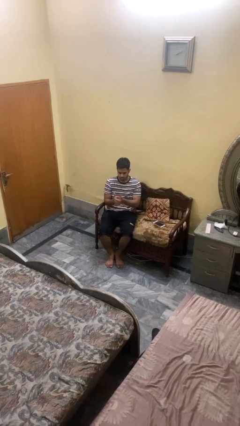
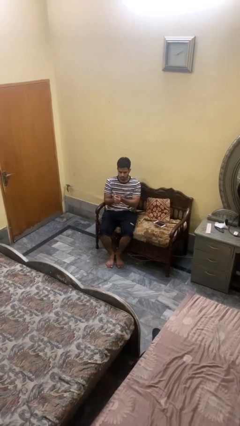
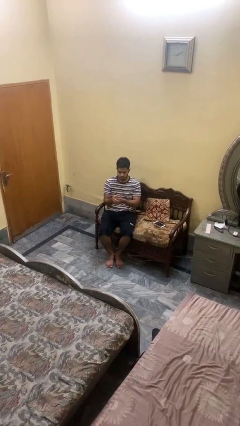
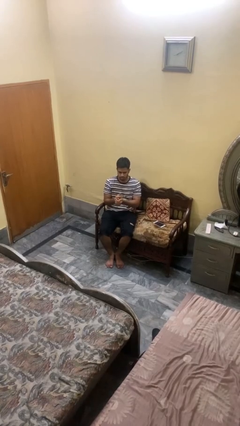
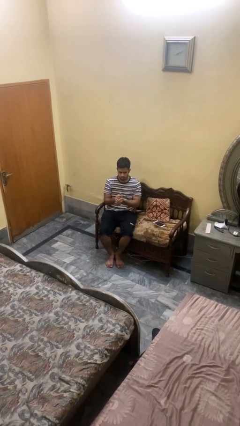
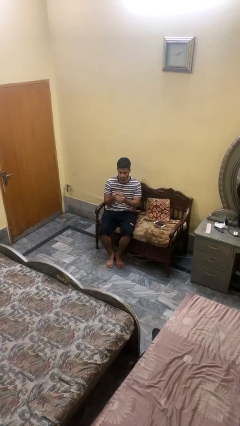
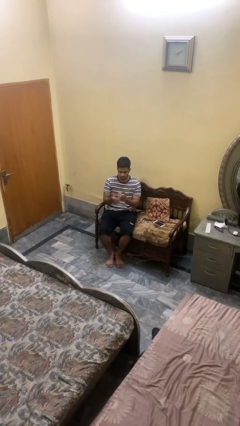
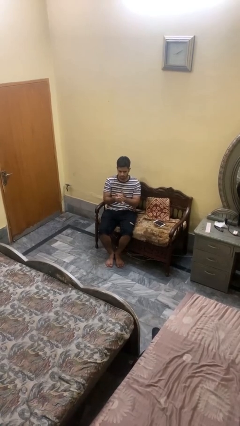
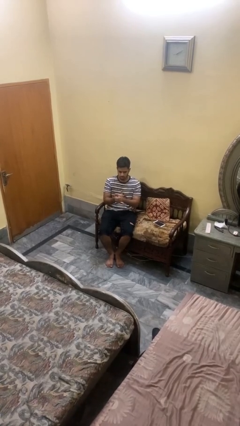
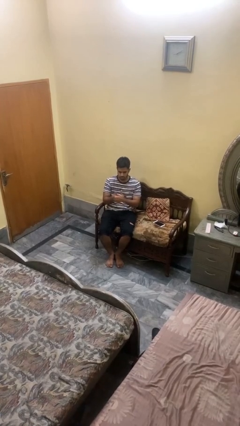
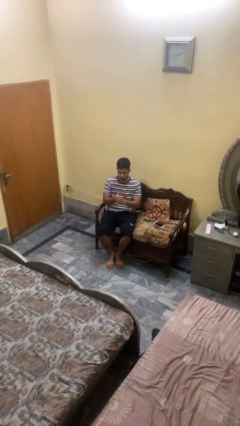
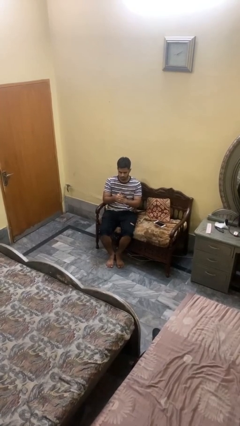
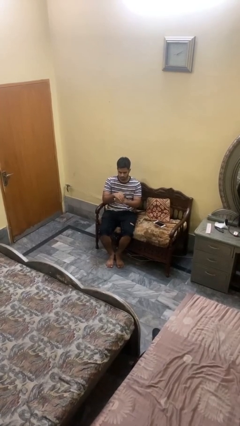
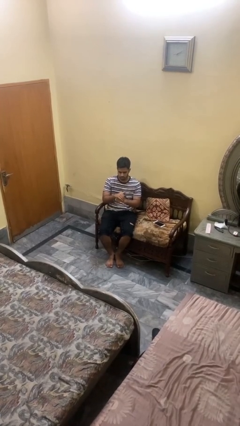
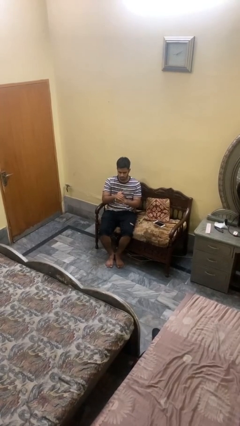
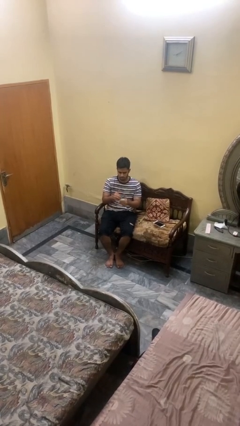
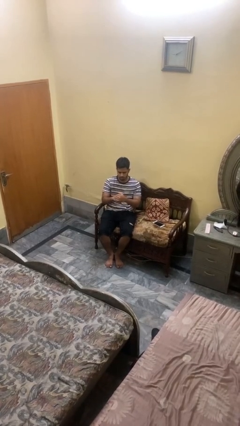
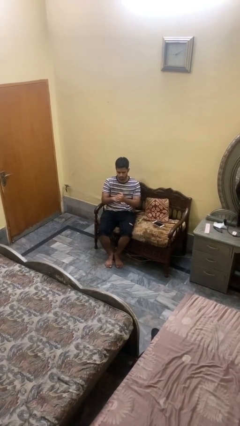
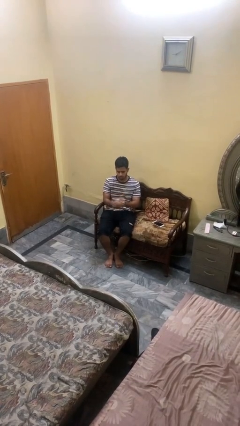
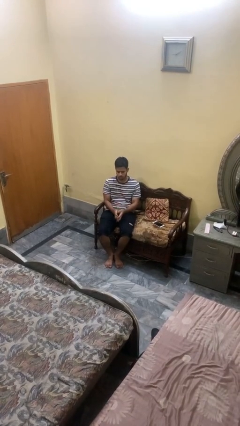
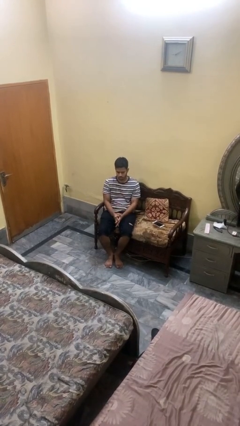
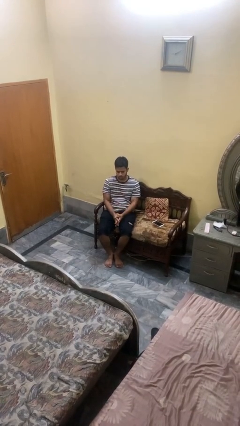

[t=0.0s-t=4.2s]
person cracks knuckles

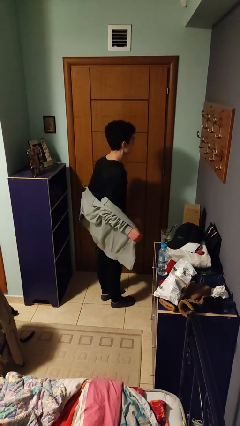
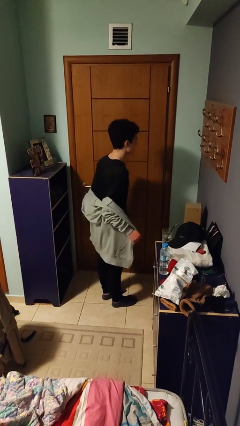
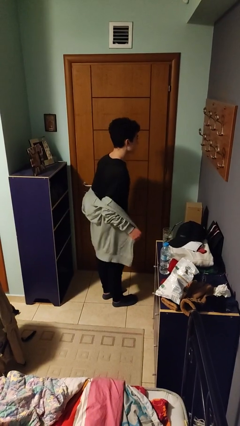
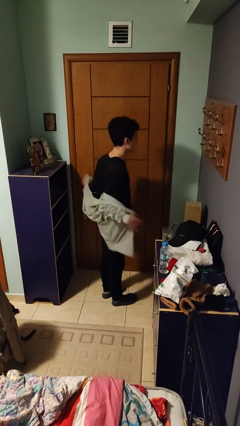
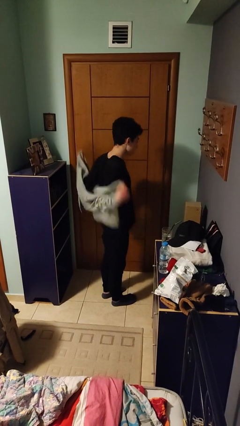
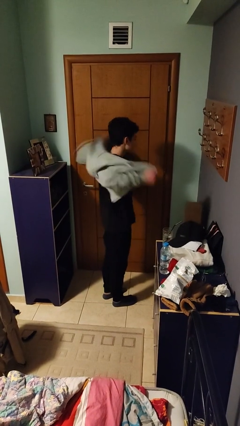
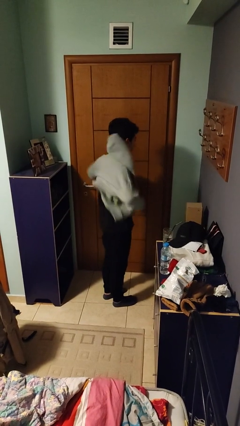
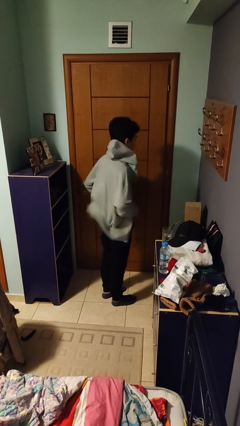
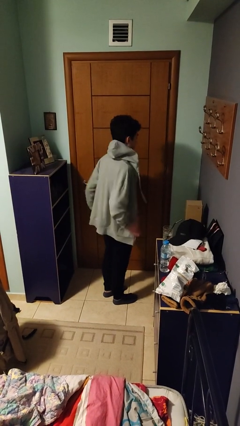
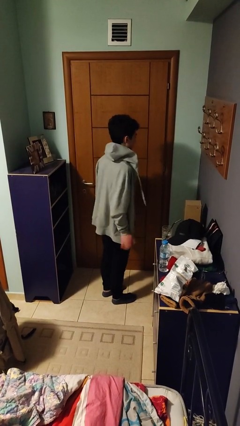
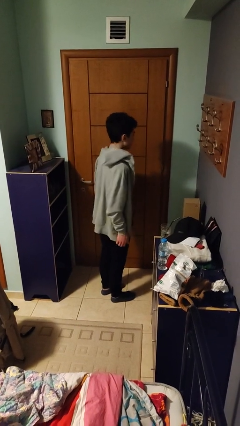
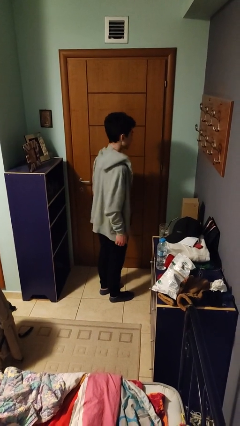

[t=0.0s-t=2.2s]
person puts on jacket

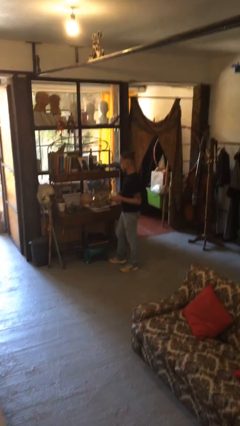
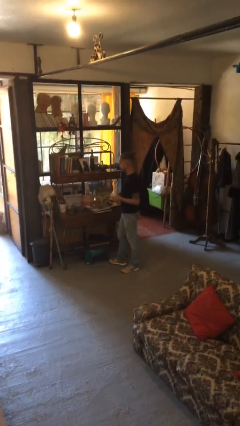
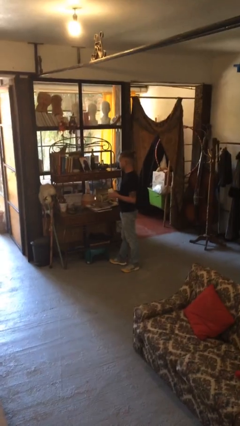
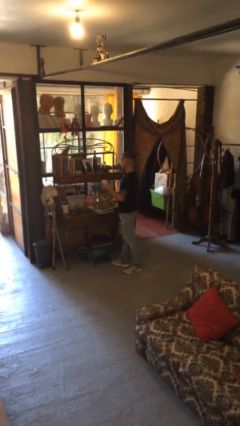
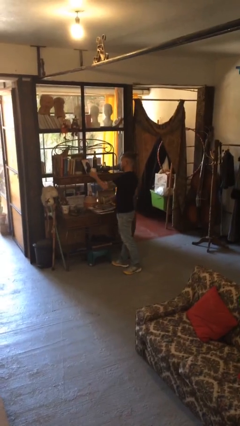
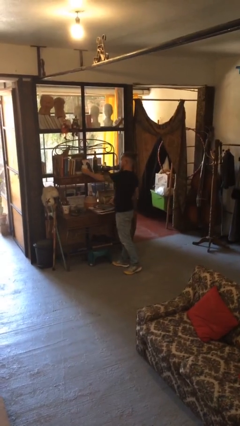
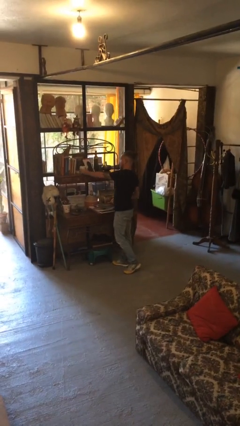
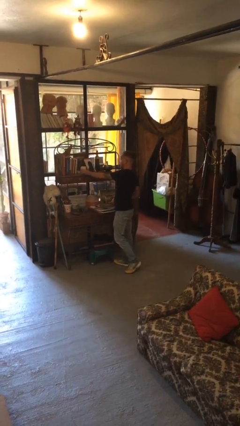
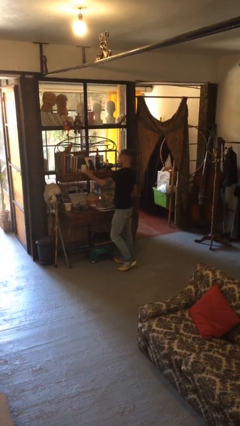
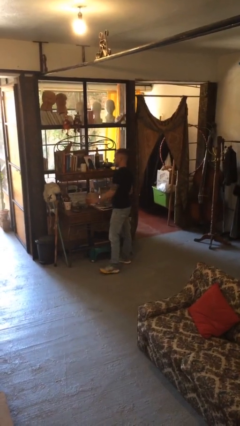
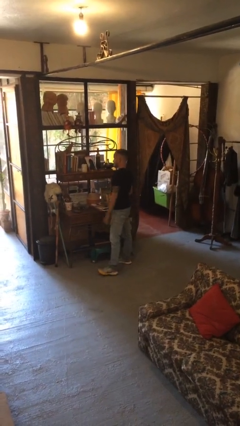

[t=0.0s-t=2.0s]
person puts down object on countertop

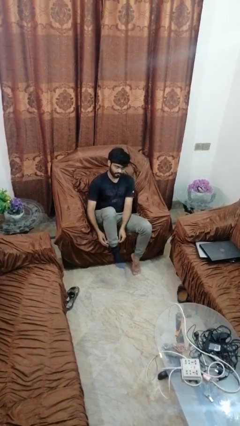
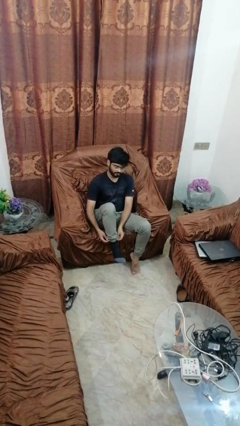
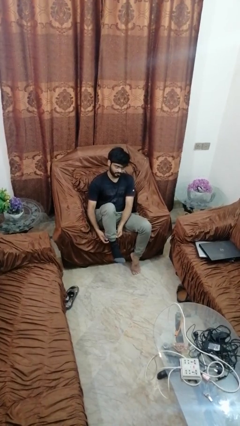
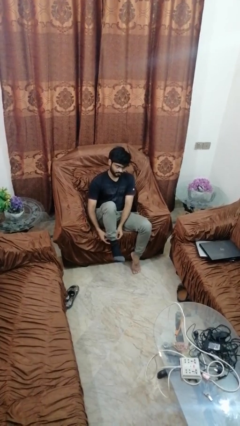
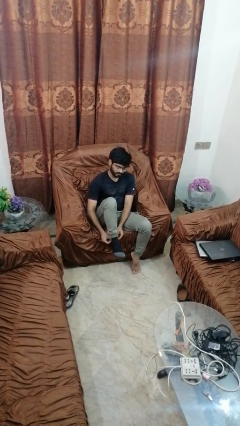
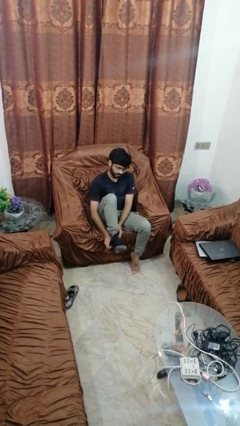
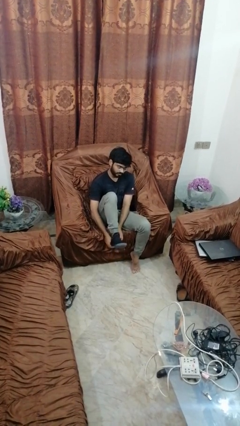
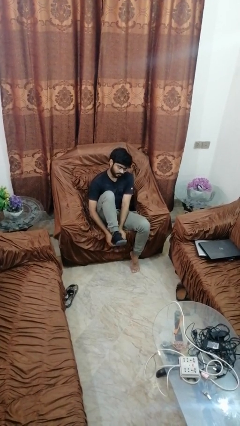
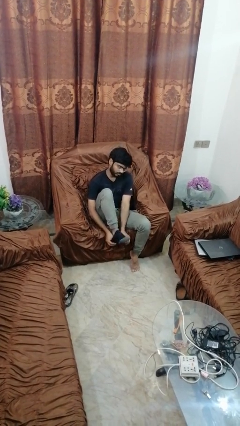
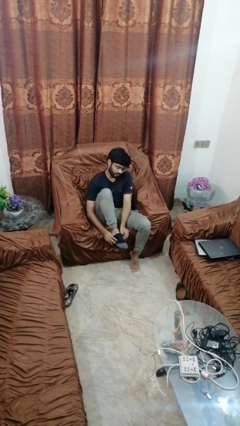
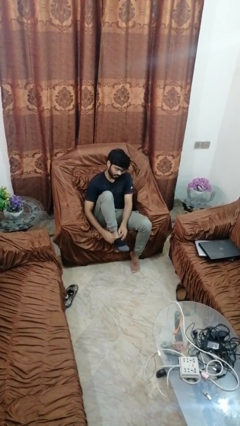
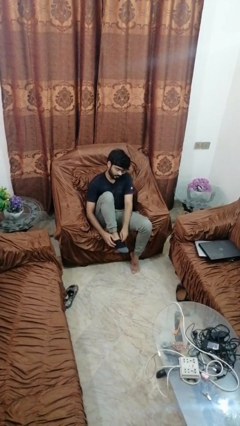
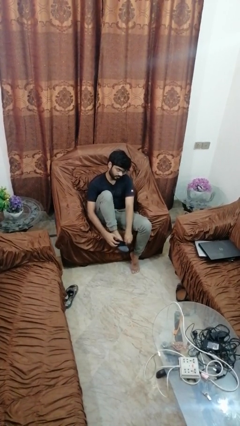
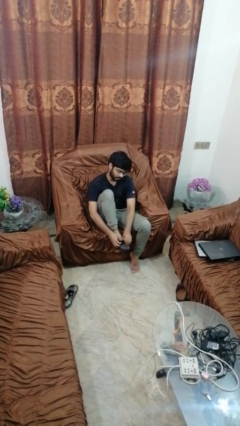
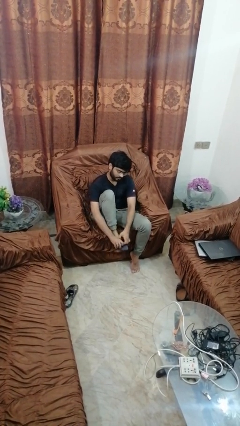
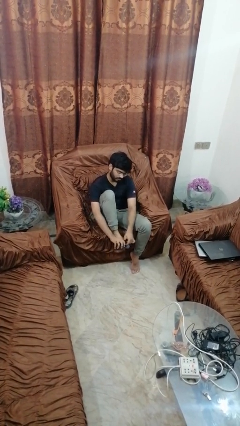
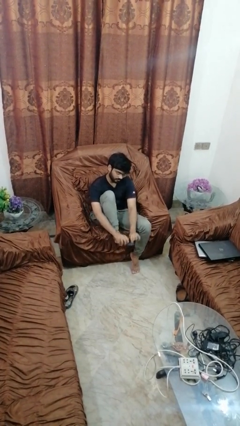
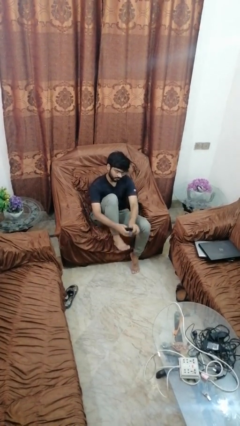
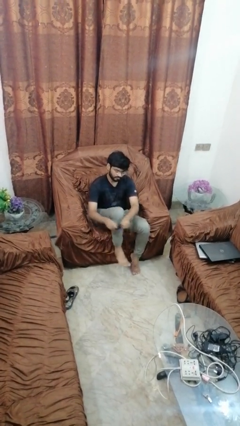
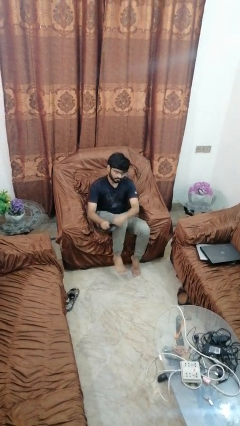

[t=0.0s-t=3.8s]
person takes off socks

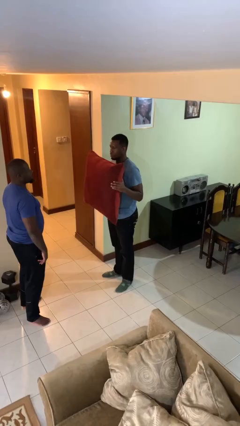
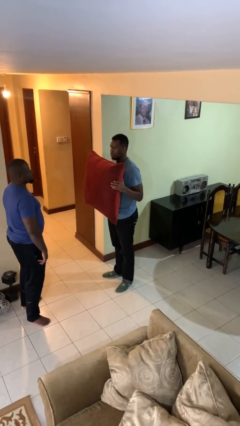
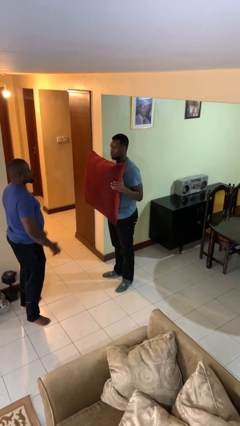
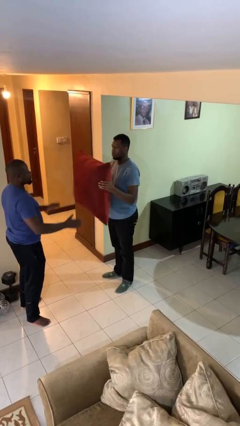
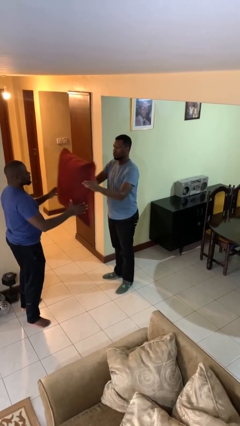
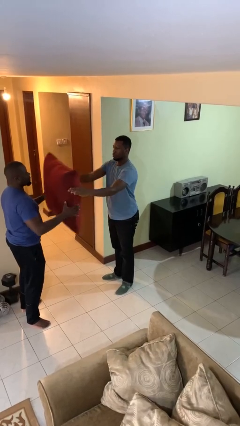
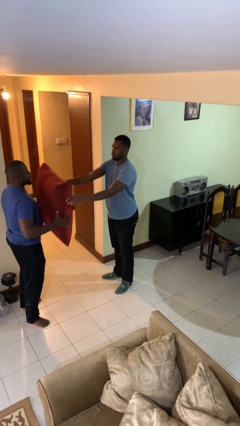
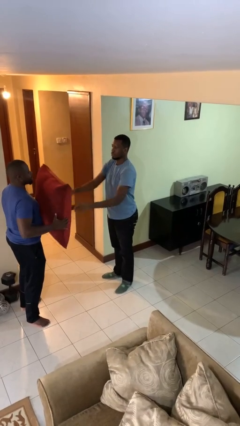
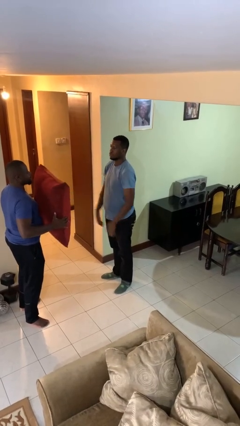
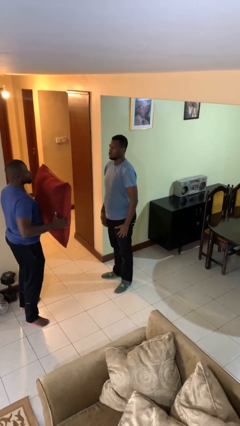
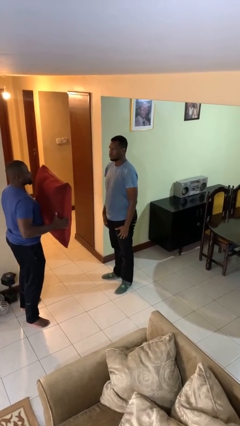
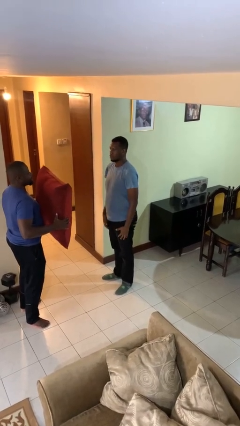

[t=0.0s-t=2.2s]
person transfers object to person

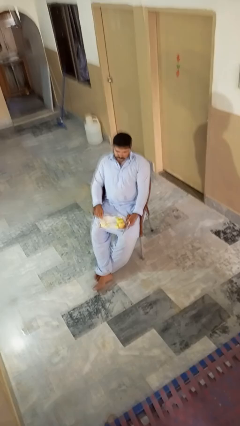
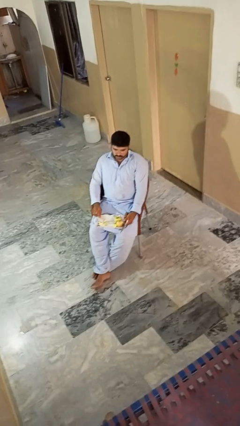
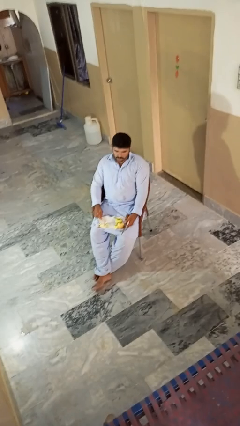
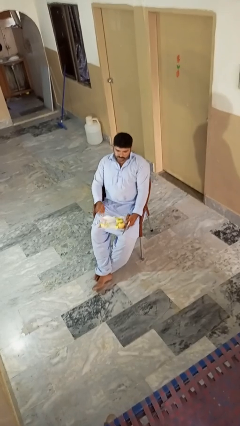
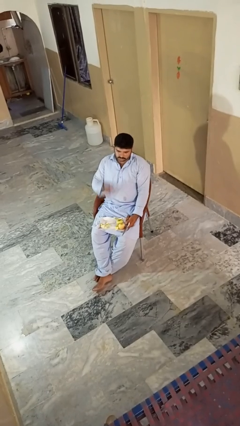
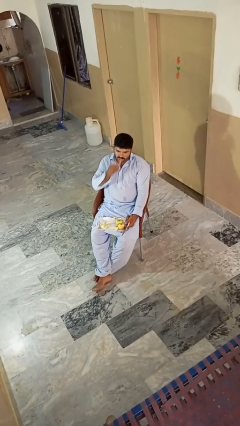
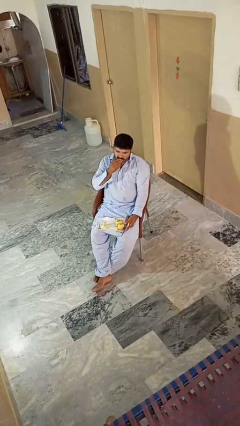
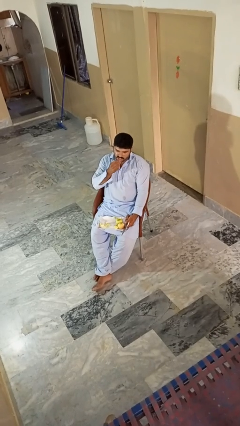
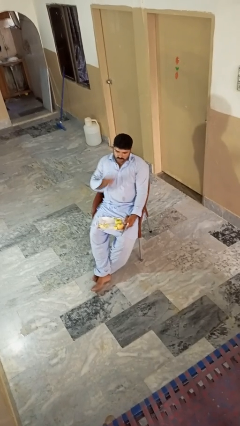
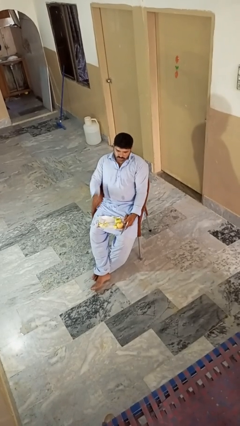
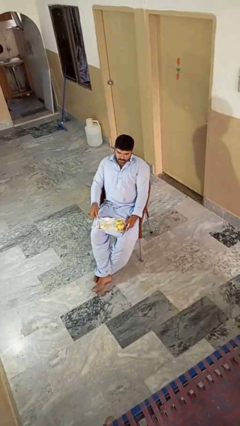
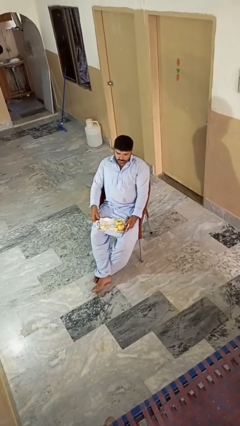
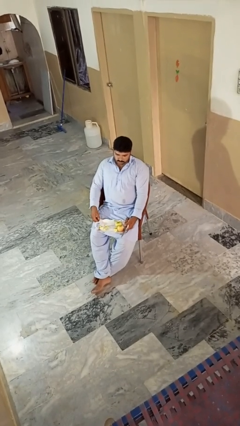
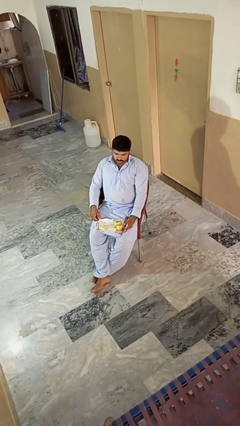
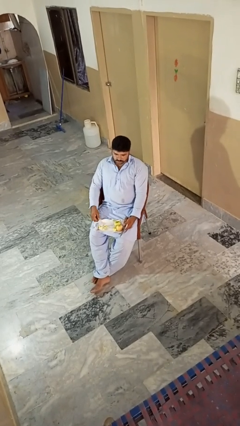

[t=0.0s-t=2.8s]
person eats apple

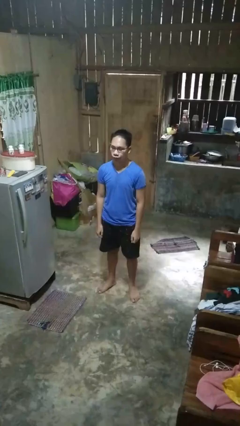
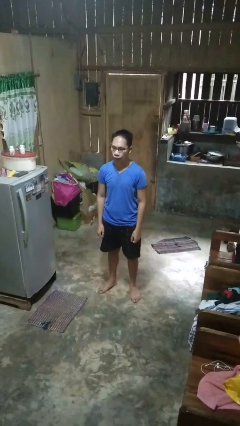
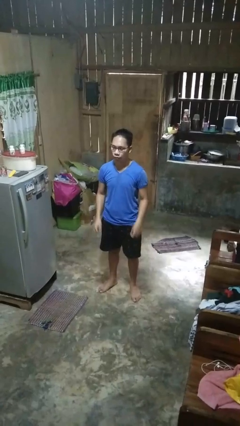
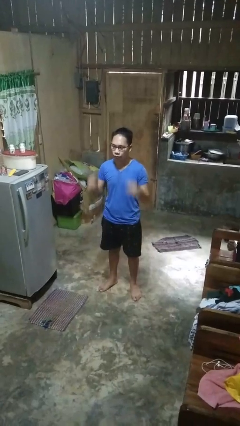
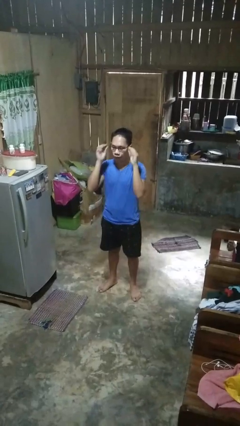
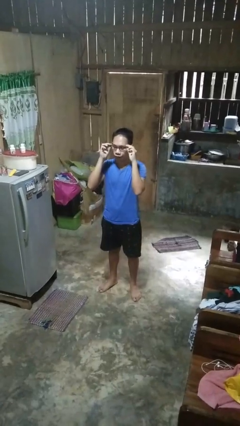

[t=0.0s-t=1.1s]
person takes off glasses
